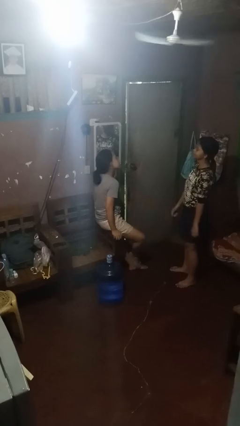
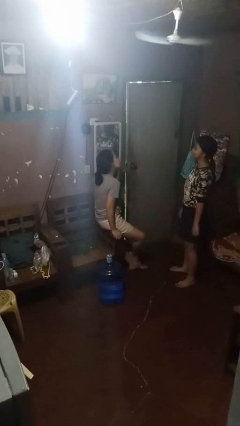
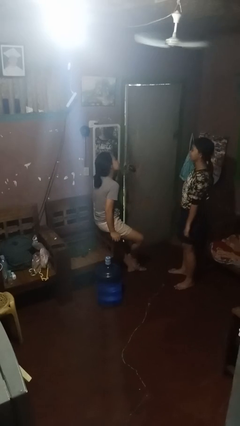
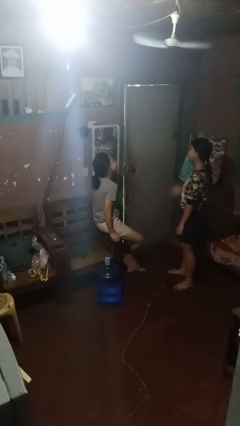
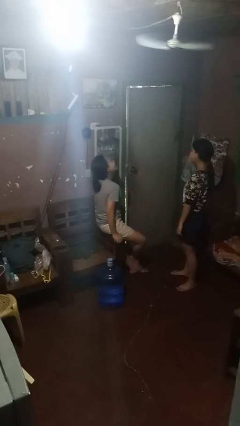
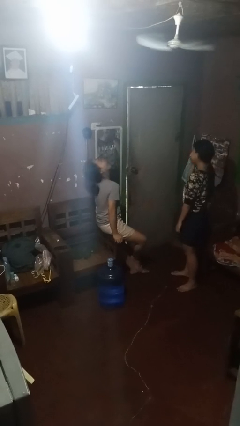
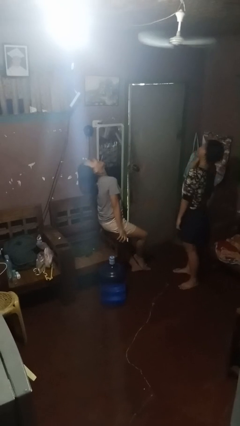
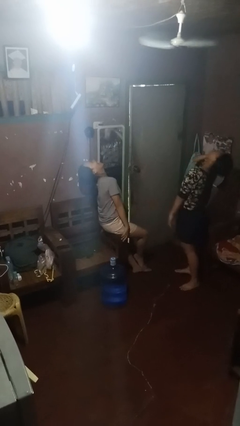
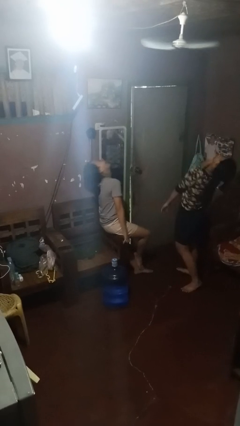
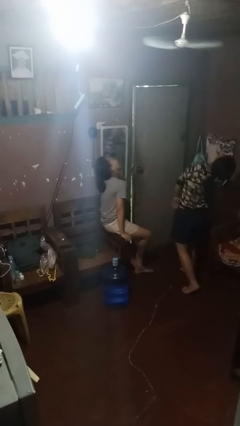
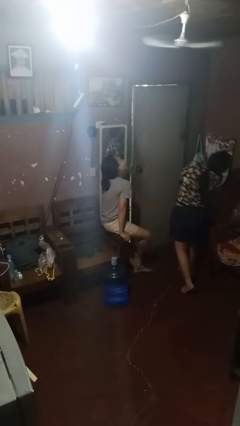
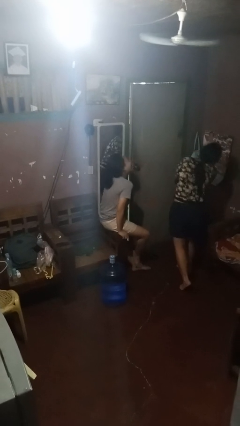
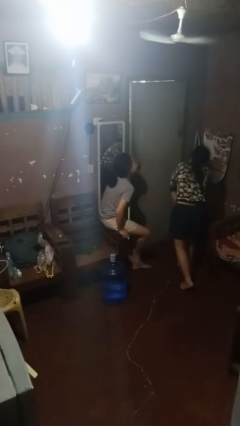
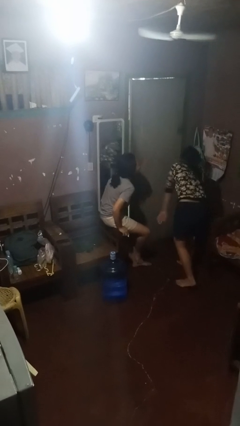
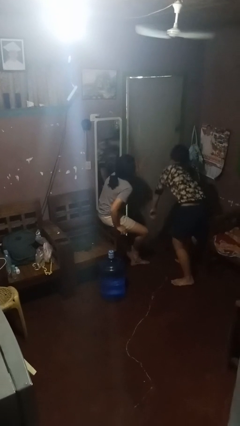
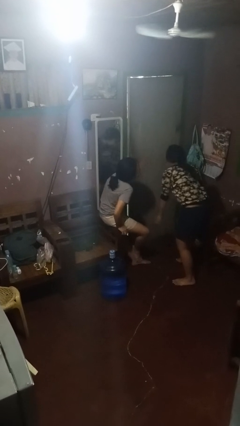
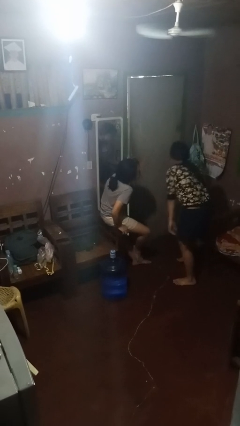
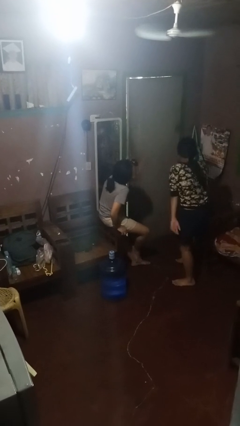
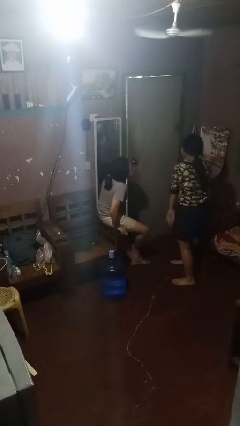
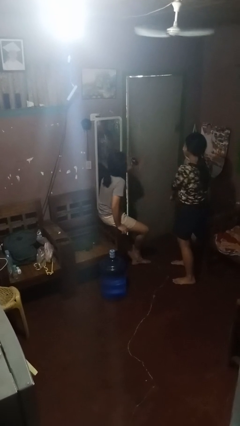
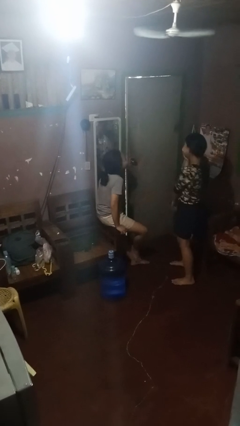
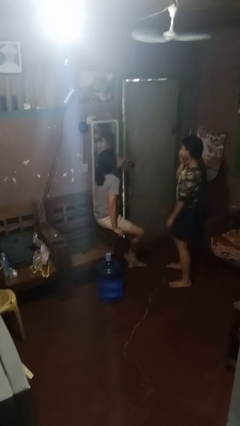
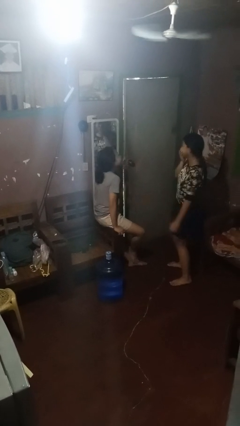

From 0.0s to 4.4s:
person laughs with person

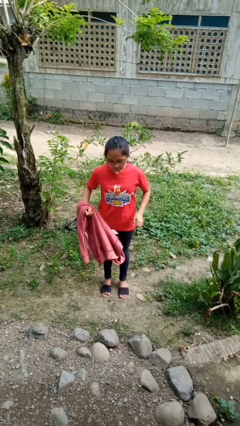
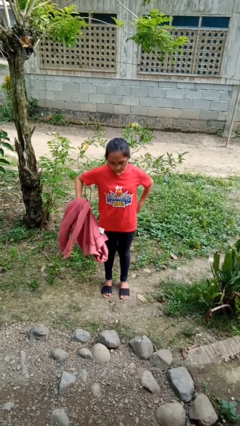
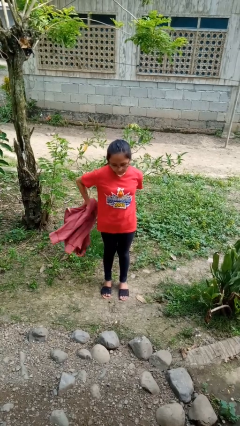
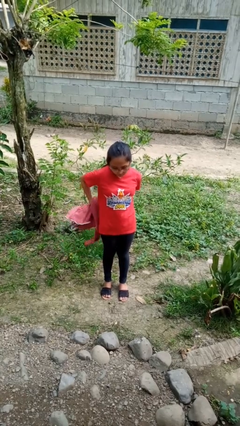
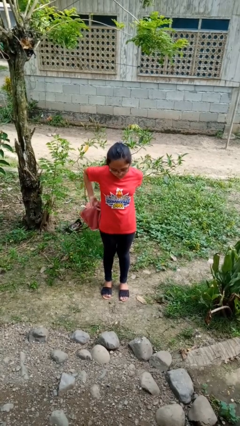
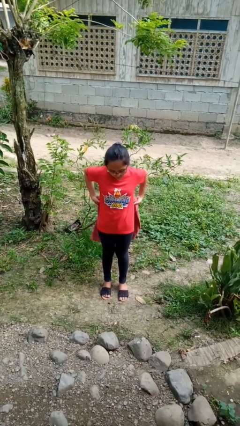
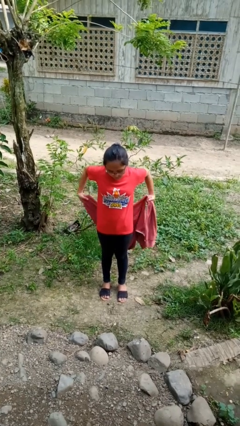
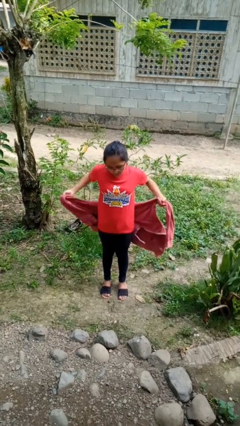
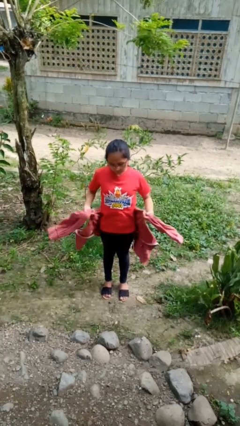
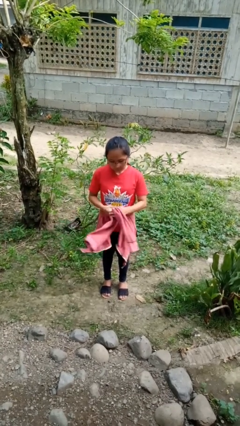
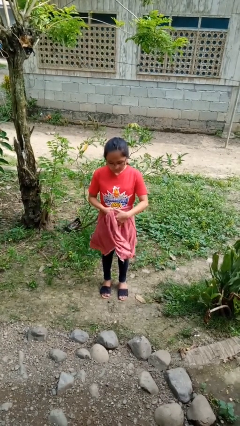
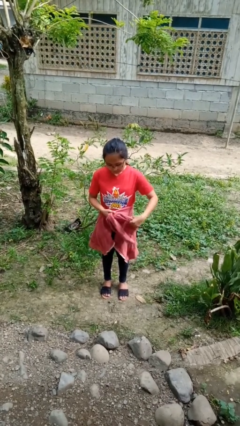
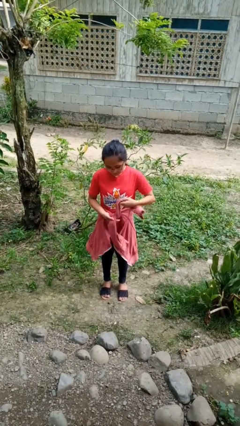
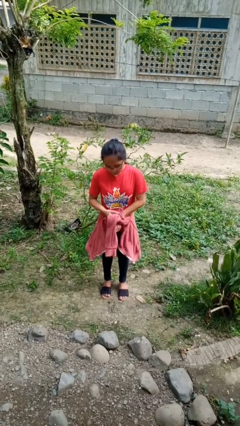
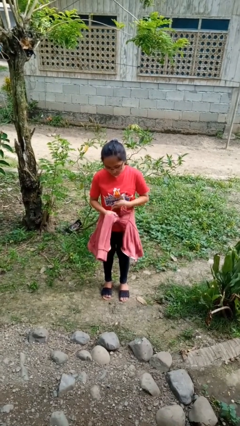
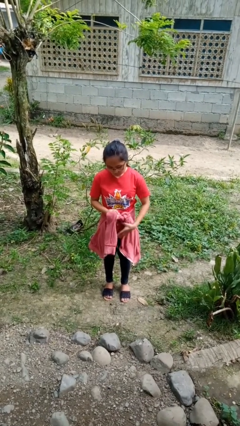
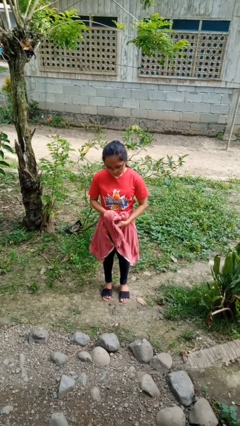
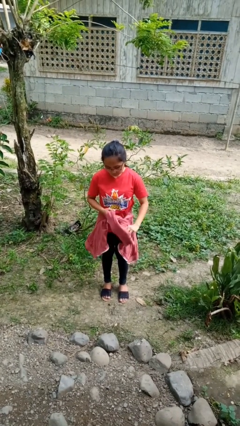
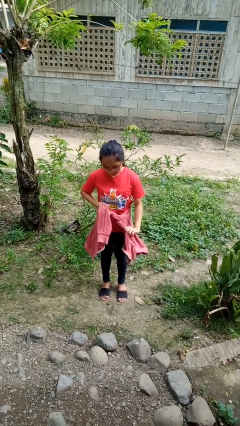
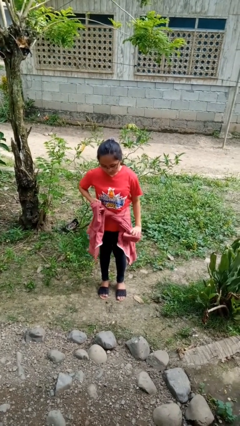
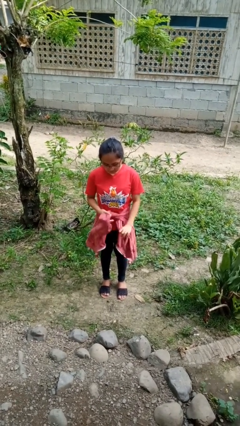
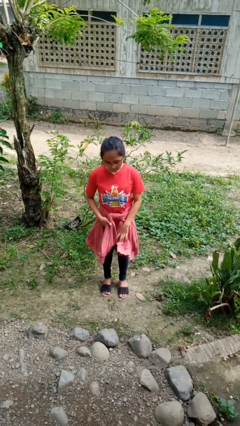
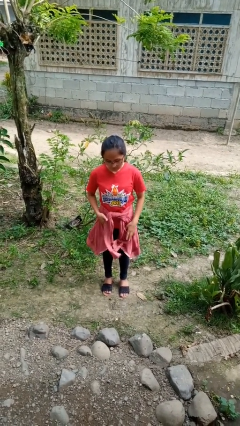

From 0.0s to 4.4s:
person ties jacket around waist

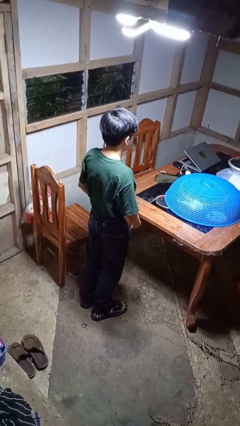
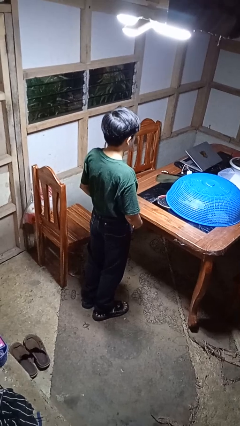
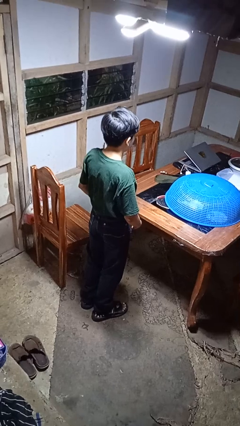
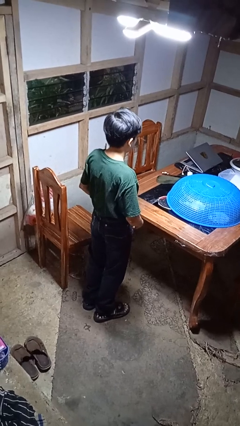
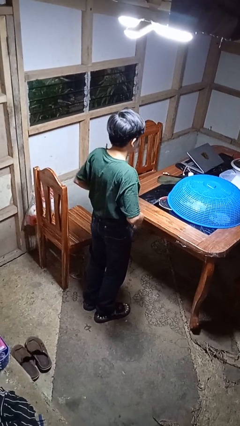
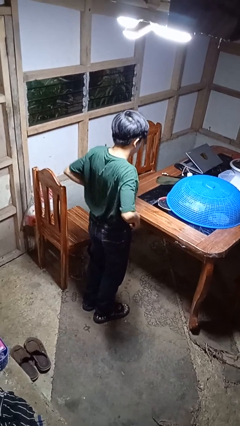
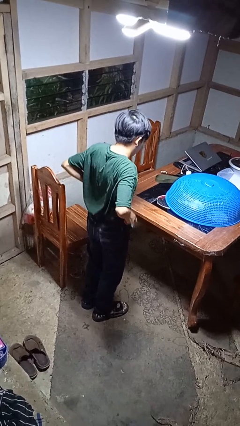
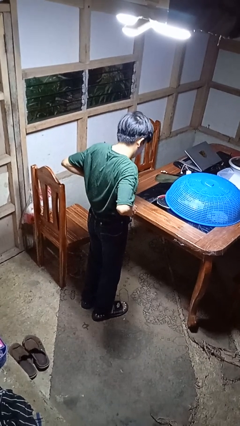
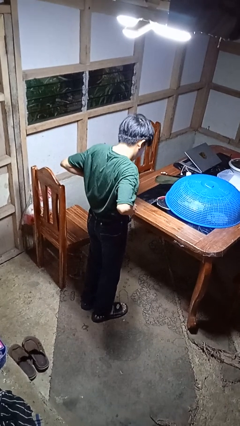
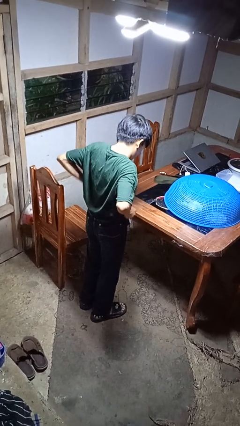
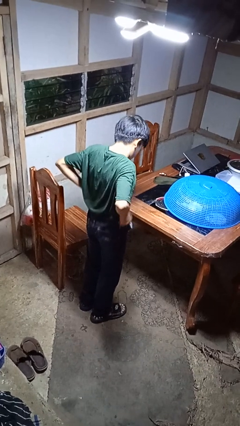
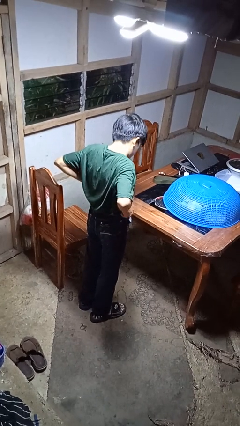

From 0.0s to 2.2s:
person hikes up pants

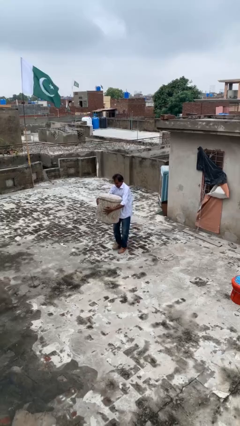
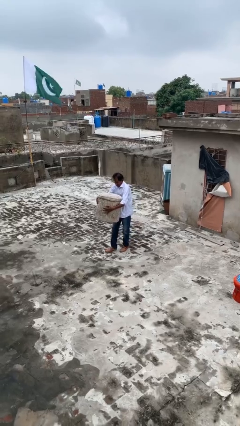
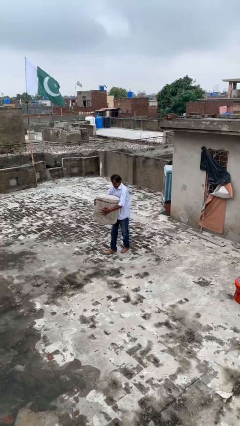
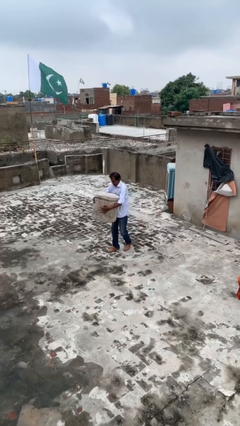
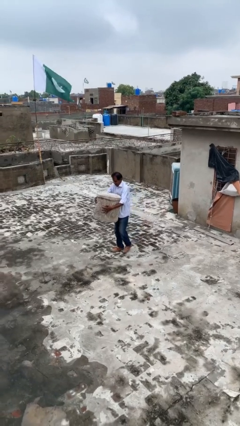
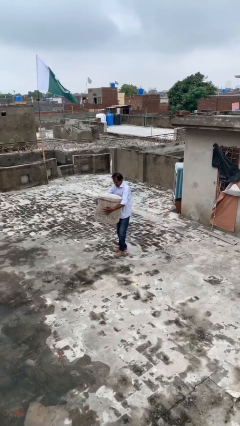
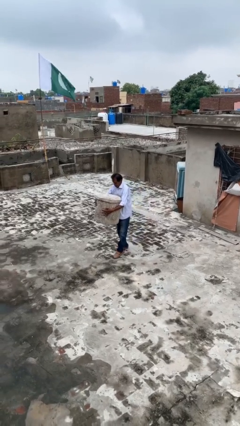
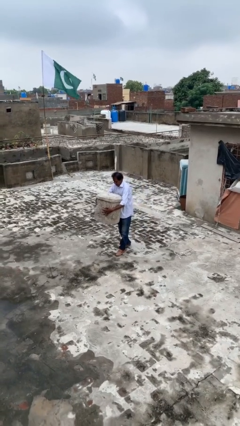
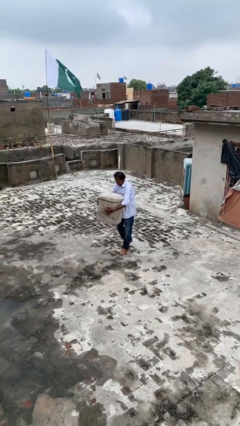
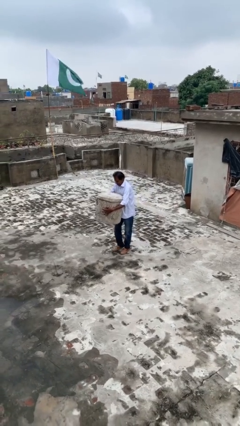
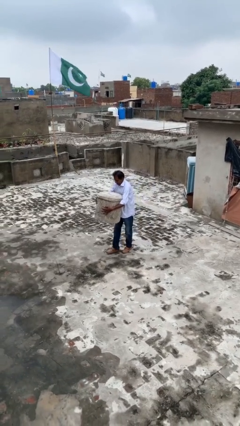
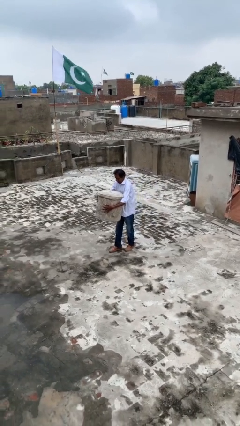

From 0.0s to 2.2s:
person carries heavy object

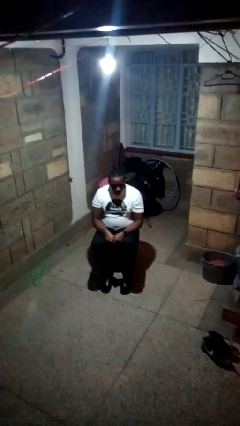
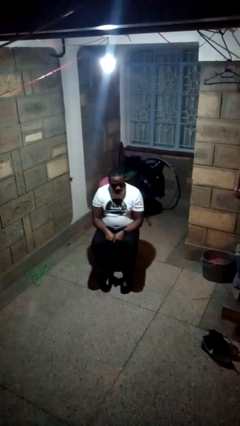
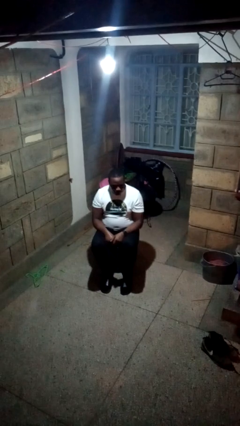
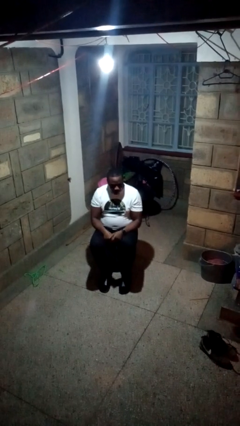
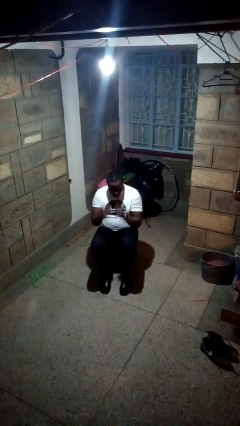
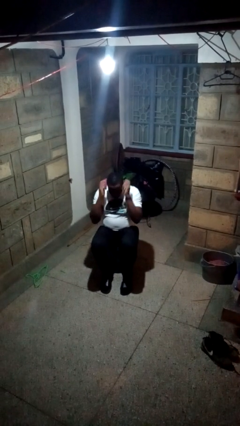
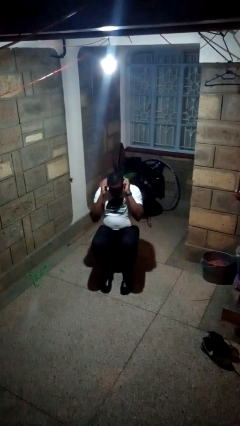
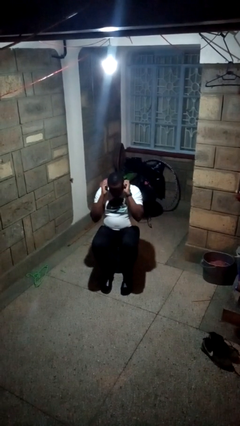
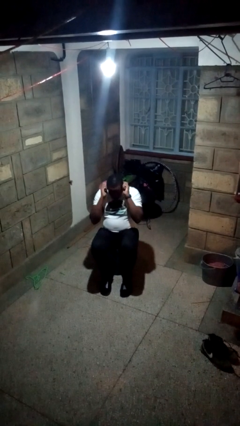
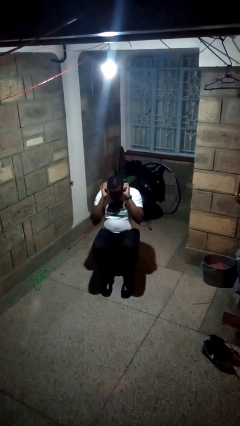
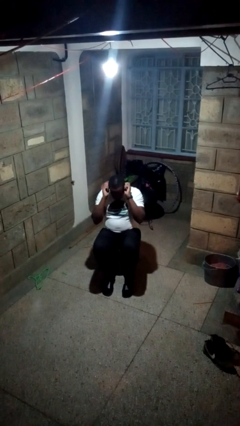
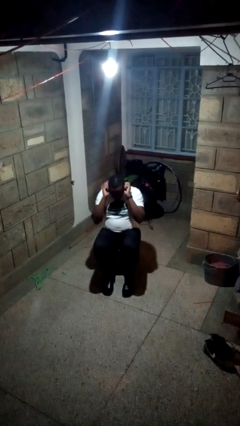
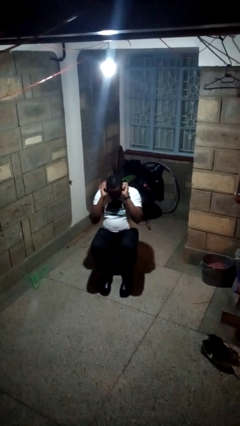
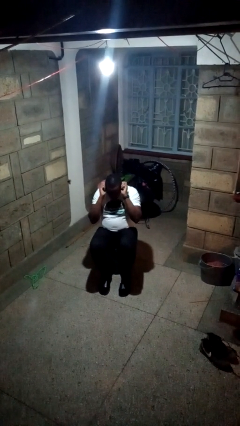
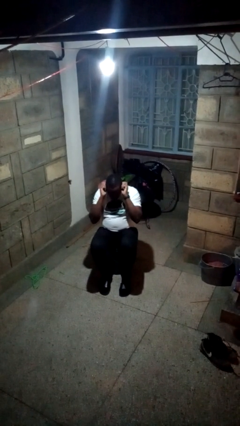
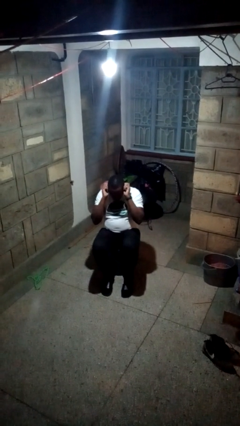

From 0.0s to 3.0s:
person touches earlobe

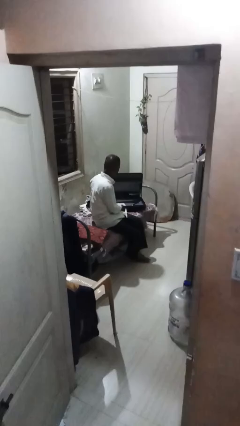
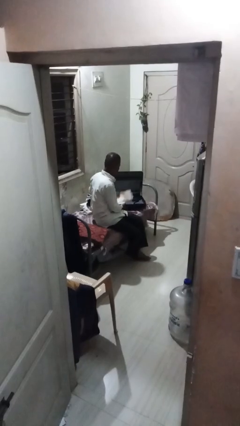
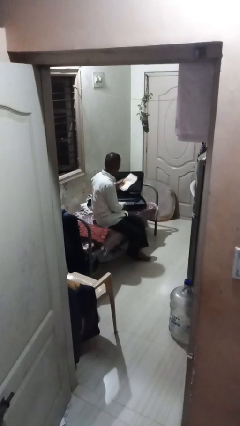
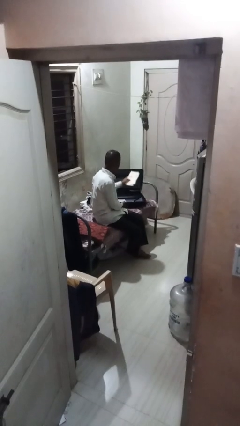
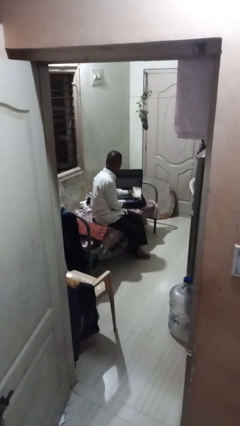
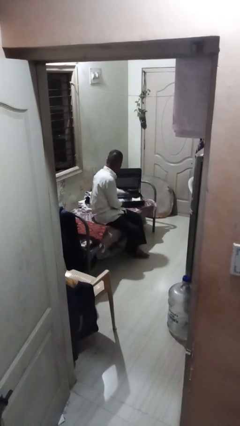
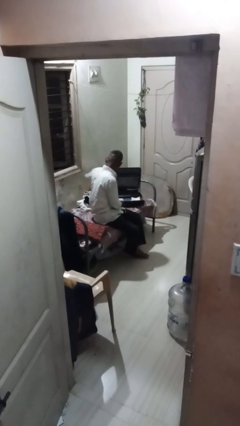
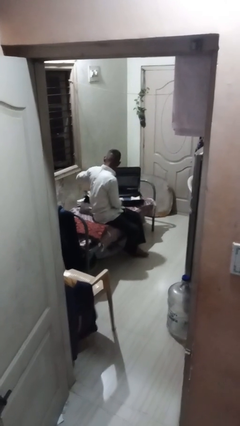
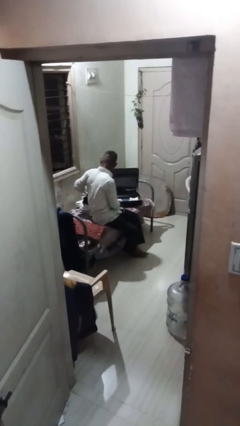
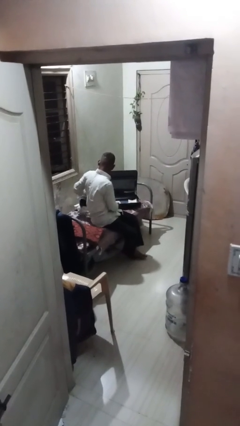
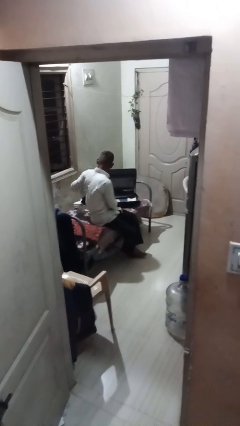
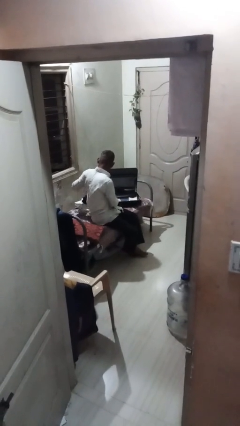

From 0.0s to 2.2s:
person loads clothes into suitcase
